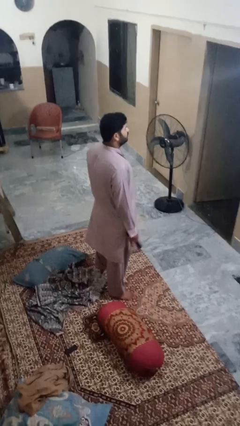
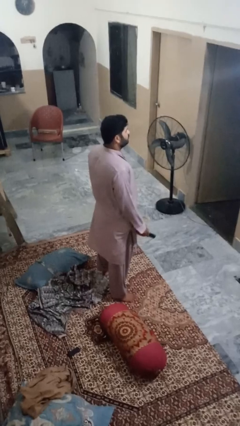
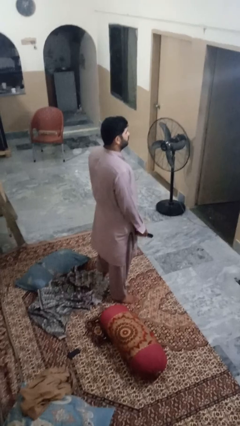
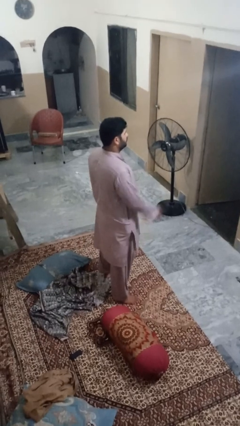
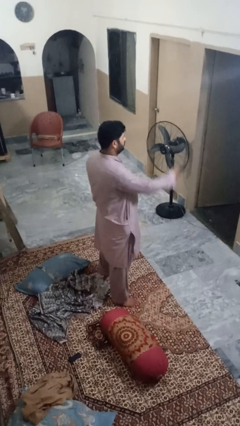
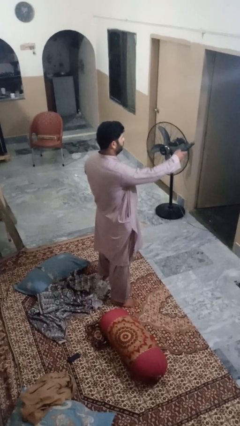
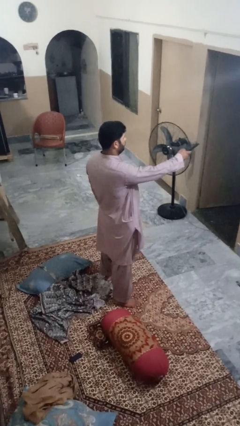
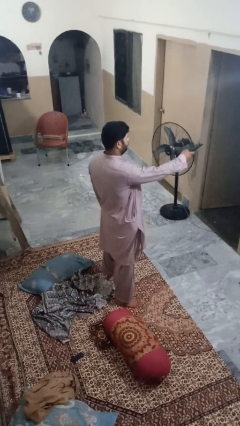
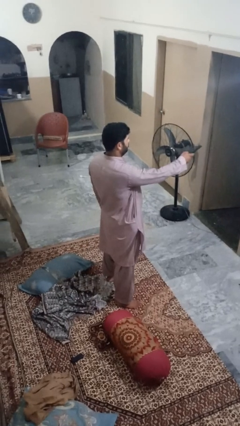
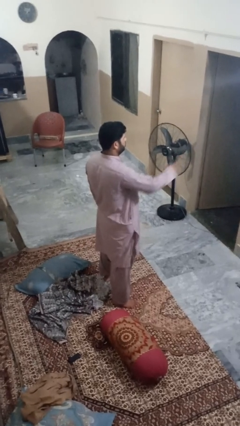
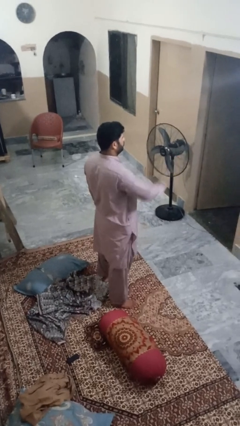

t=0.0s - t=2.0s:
person uses television remote

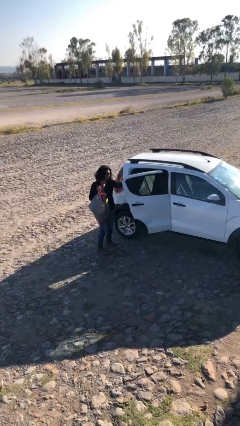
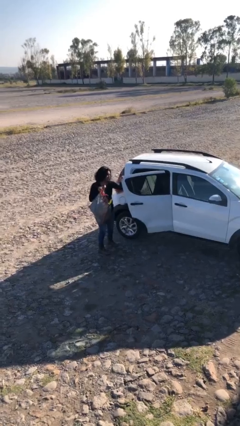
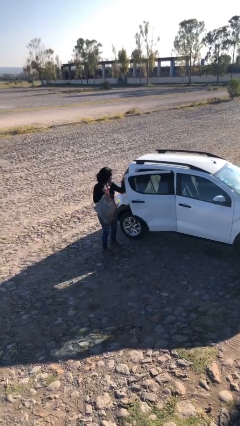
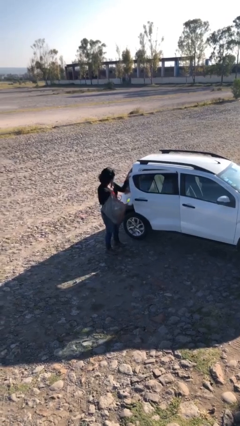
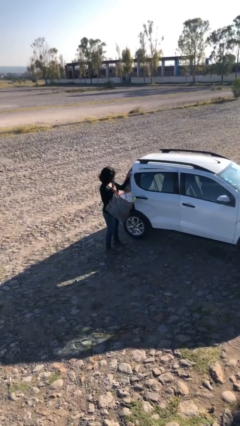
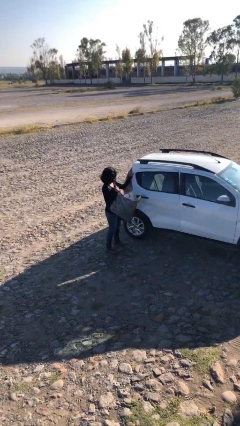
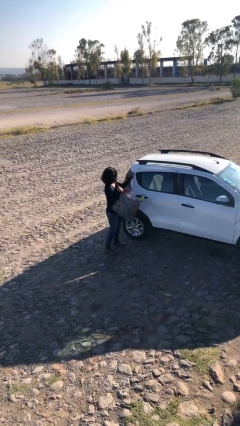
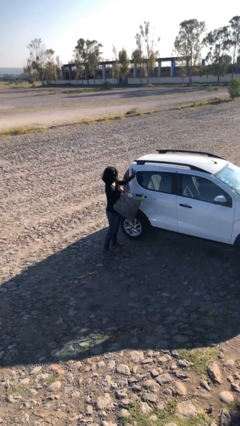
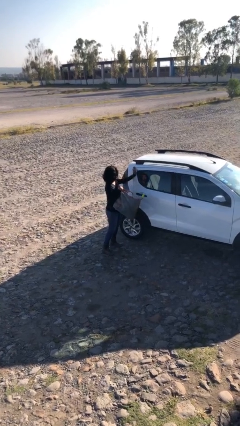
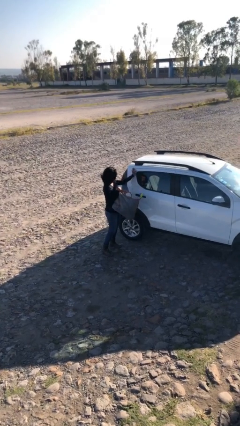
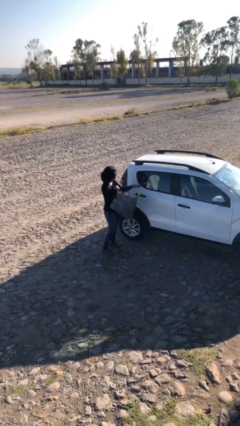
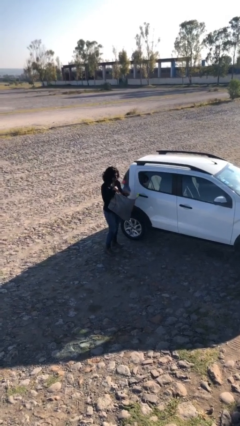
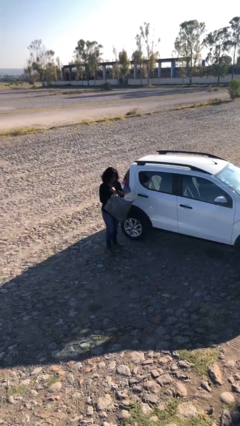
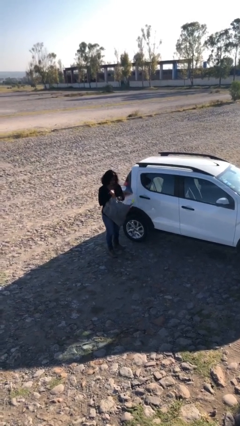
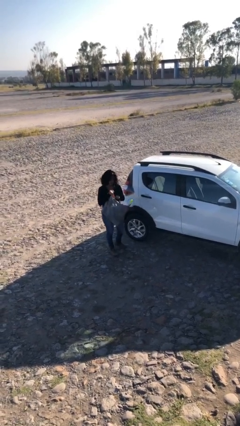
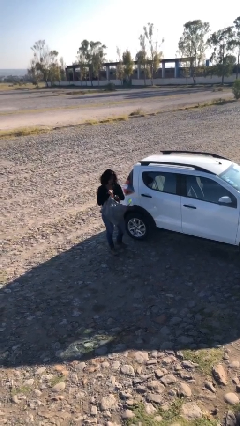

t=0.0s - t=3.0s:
person closes car door

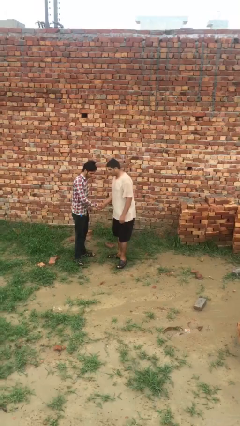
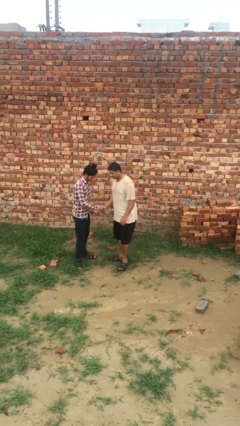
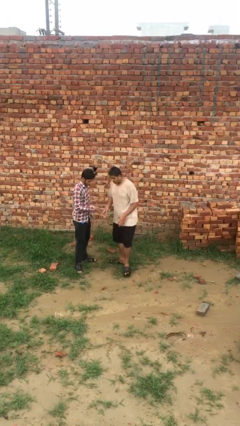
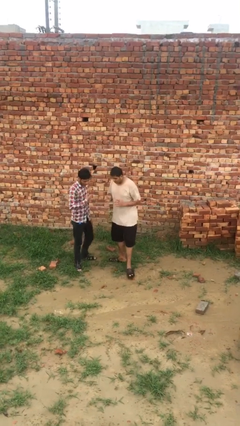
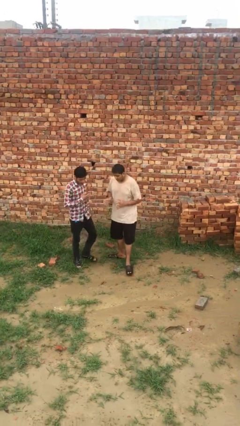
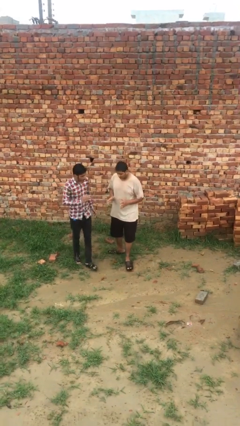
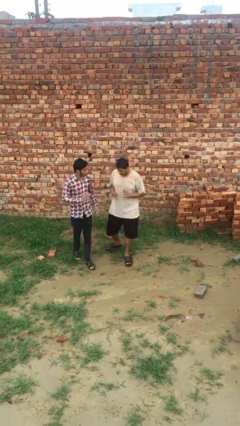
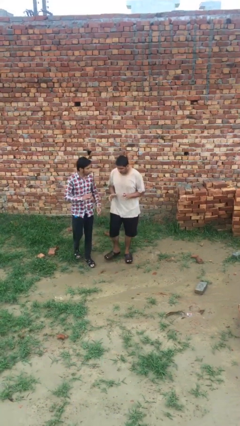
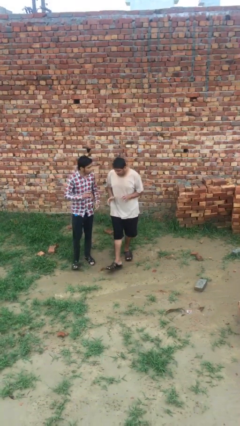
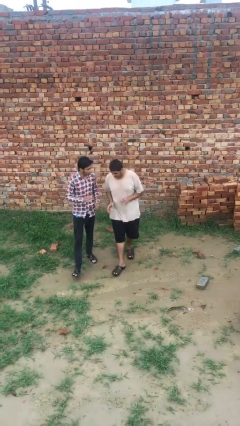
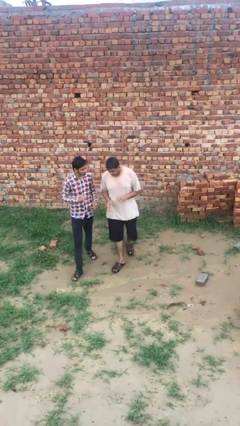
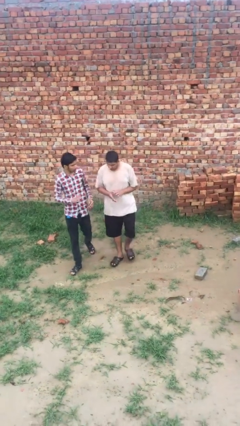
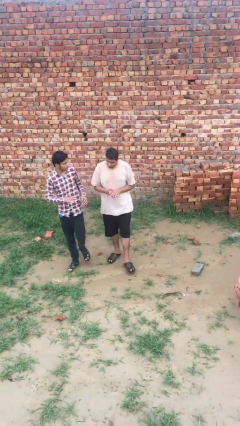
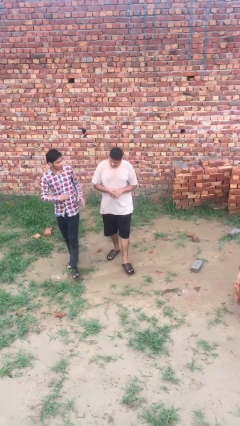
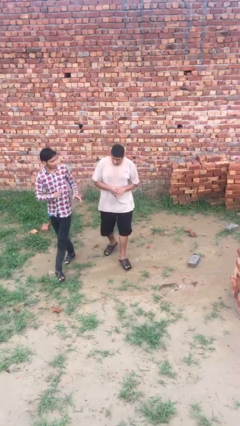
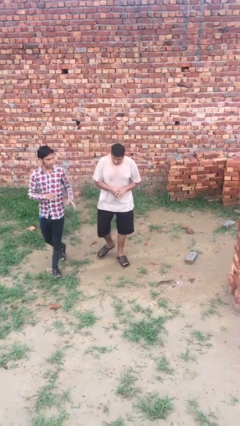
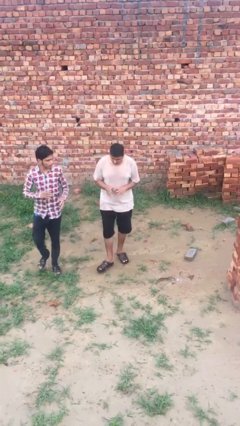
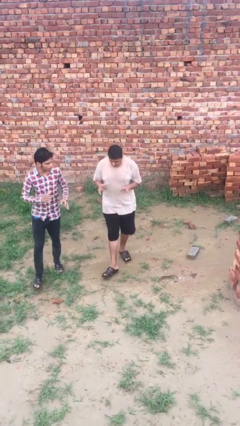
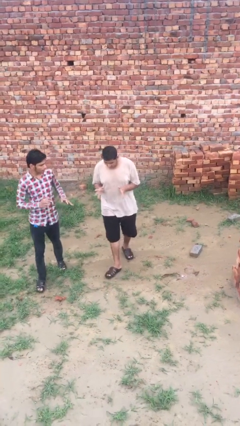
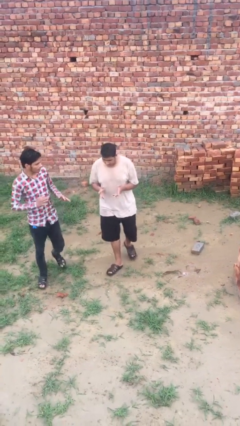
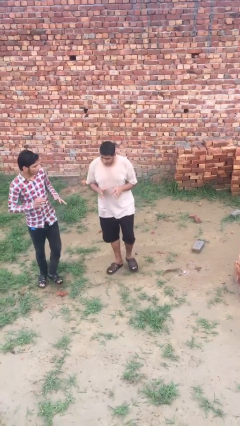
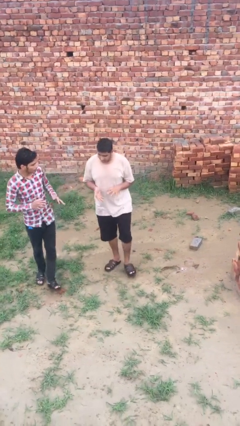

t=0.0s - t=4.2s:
person talks to person

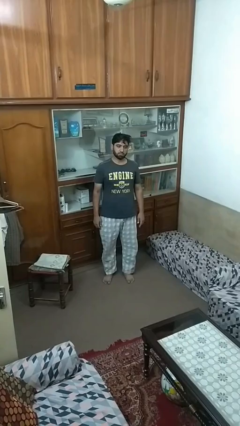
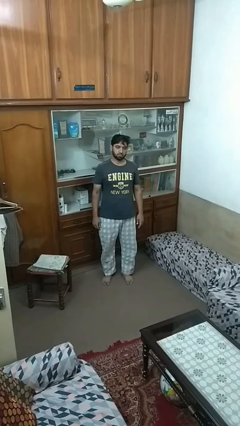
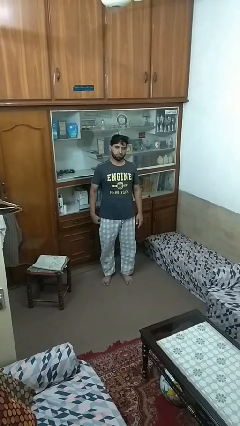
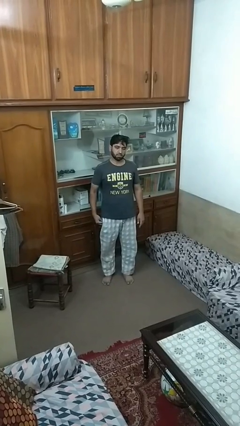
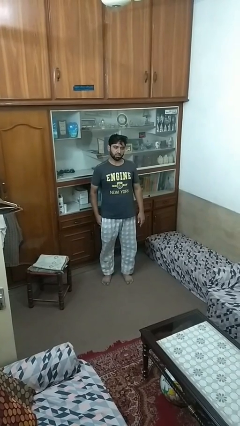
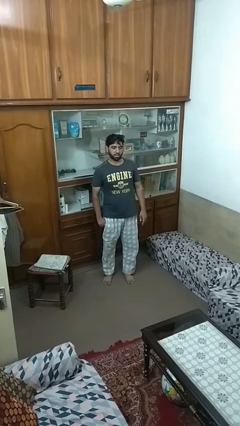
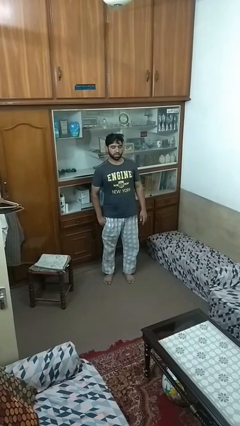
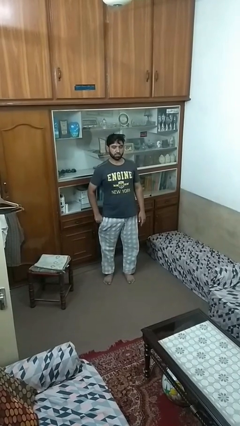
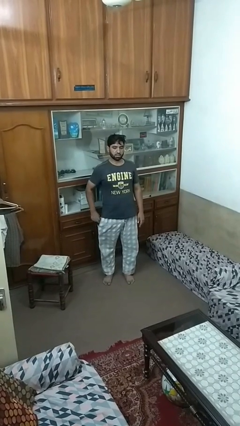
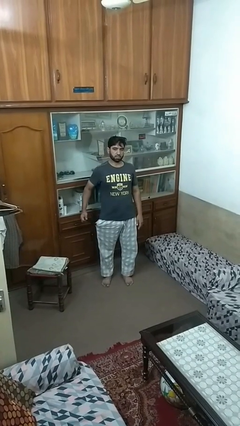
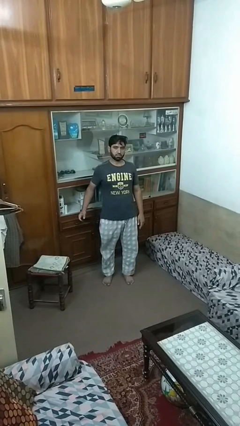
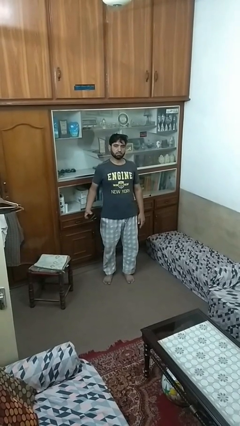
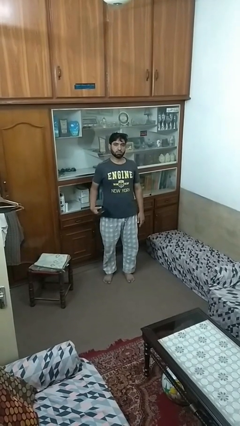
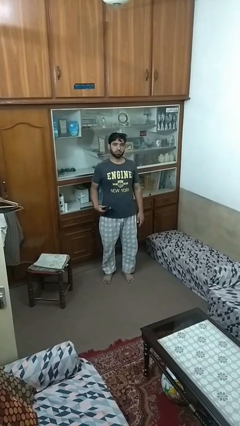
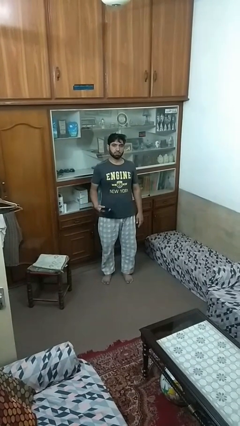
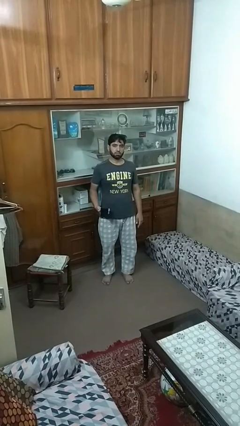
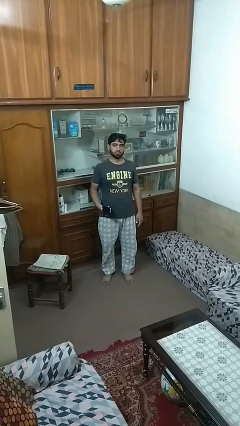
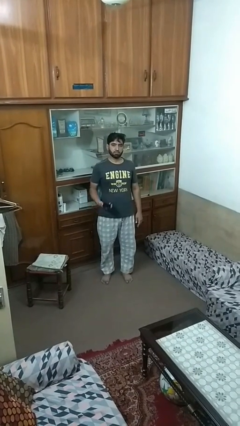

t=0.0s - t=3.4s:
person takes phone from pocket

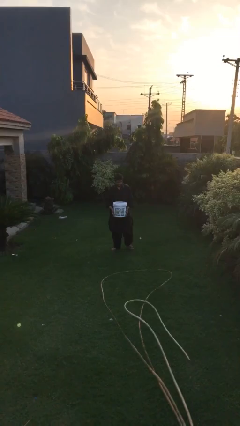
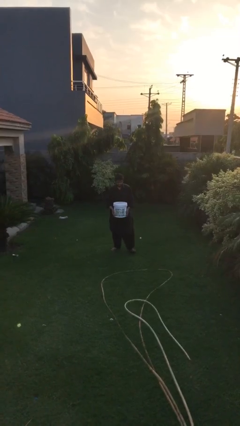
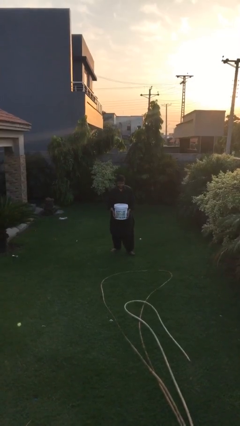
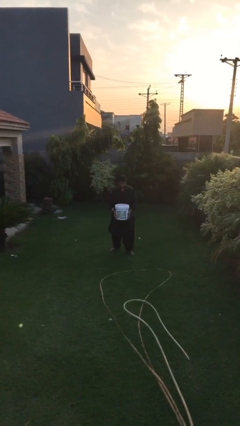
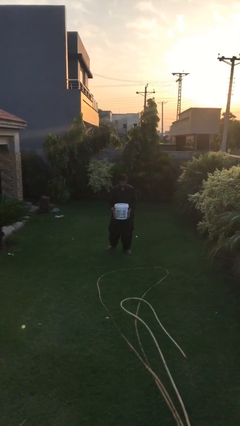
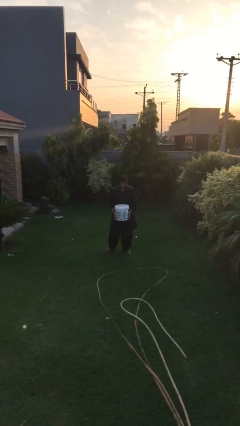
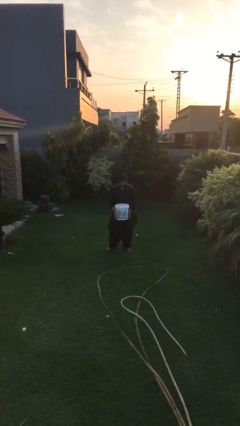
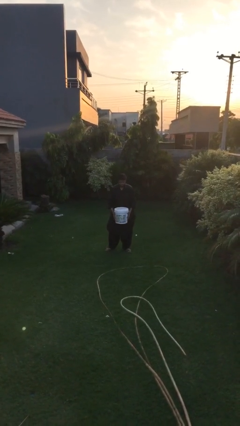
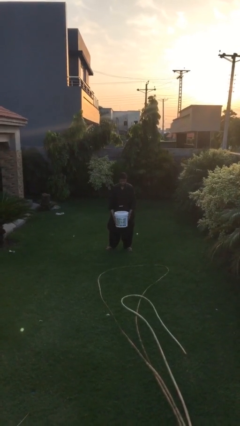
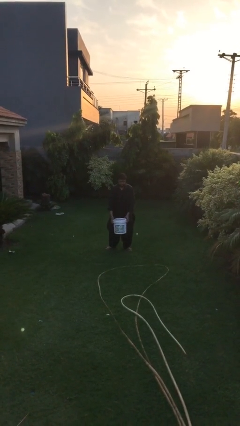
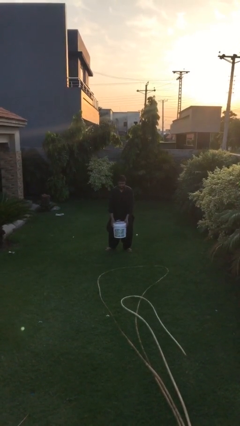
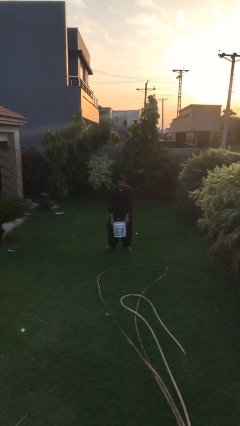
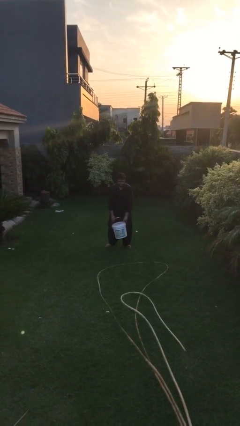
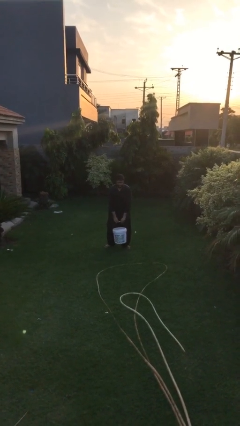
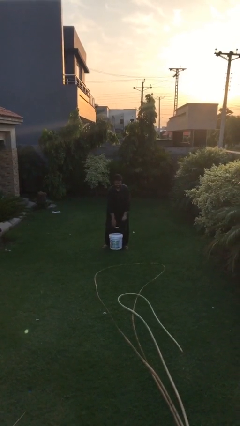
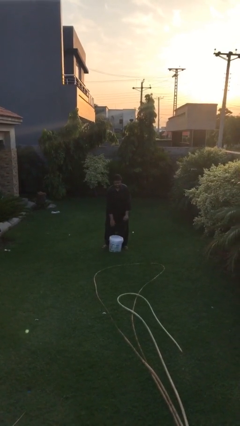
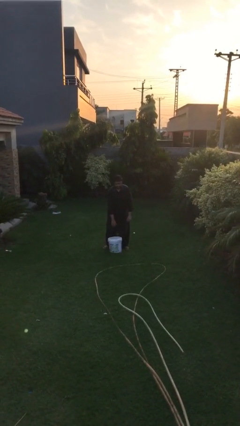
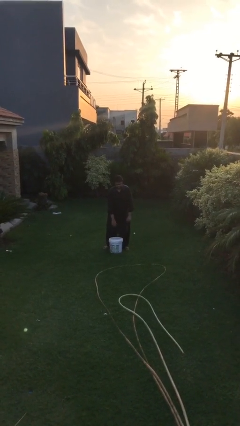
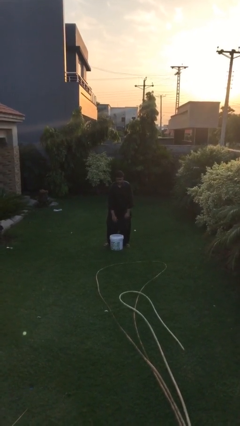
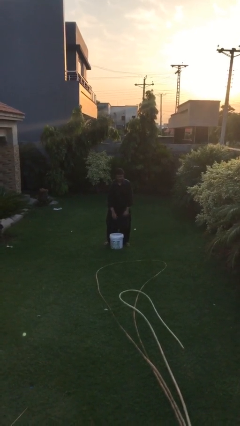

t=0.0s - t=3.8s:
person puts down object on floor

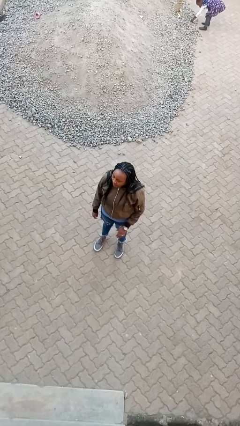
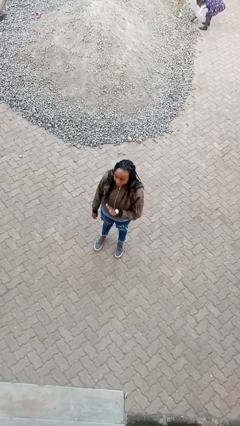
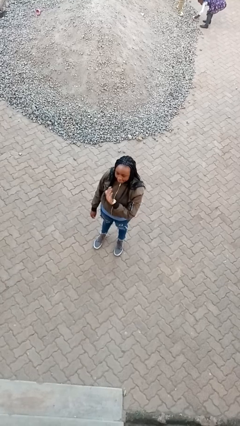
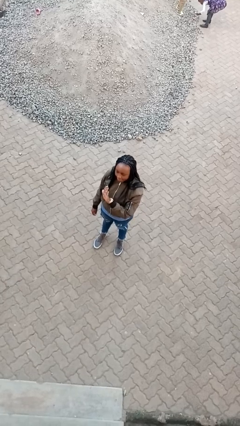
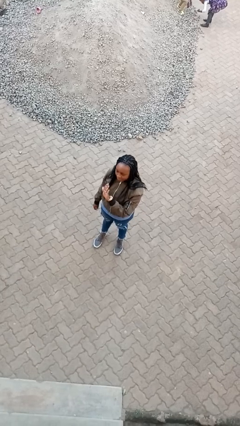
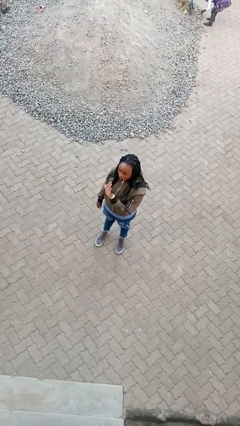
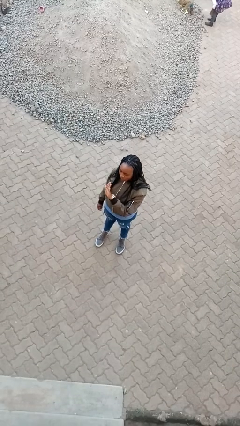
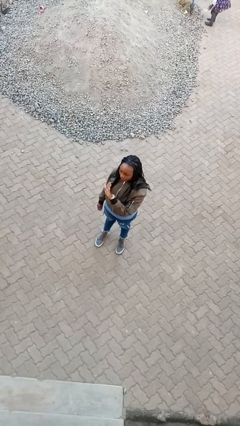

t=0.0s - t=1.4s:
person gestures stop
